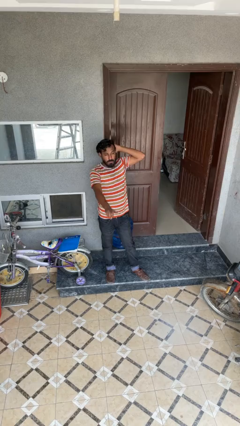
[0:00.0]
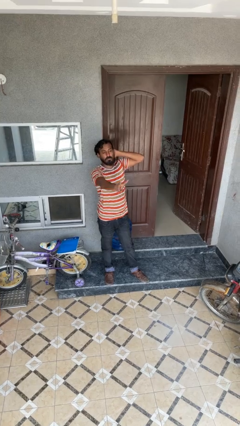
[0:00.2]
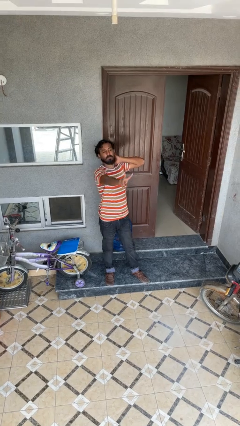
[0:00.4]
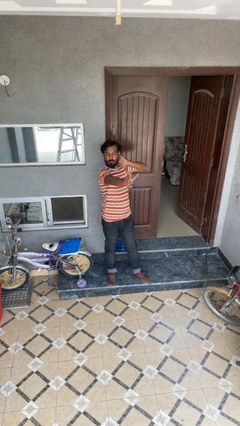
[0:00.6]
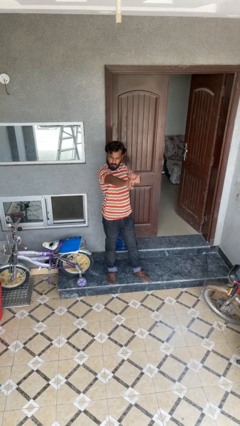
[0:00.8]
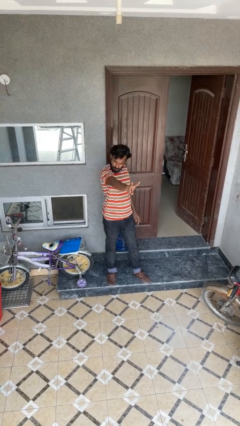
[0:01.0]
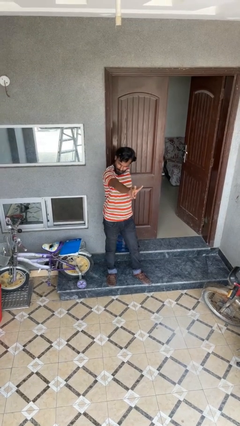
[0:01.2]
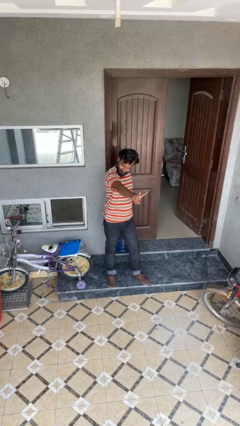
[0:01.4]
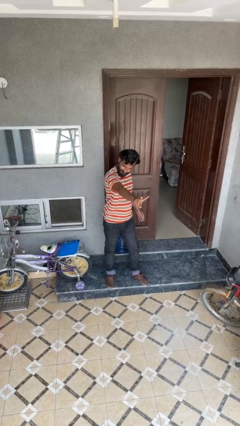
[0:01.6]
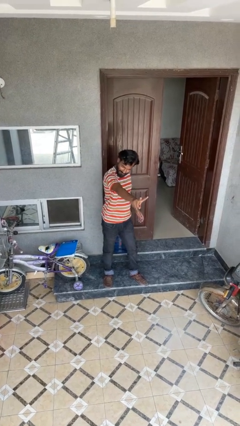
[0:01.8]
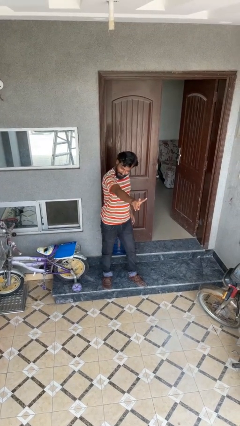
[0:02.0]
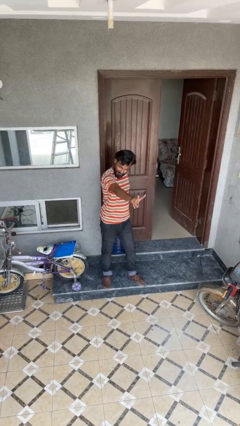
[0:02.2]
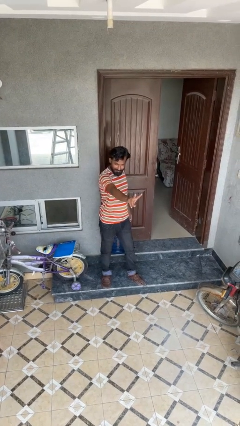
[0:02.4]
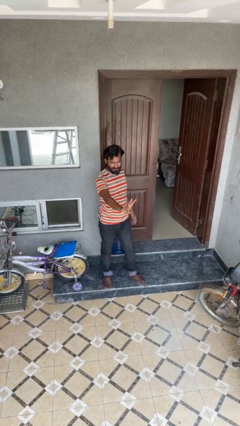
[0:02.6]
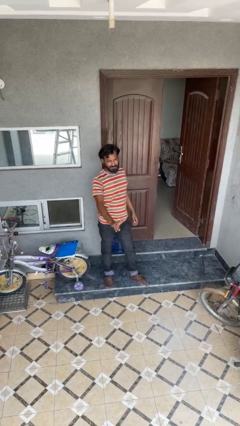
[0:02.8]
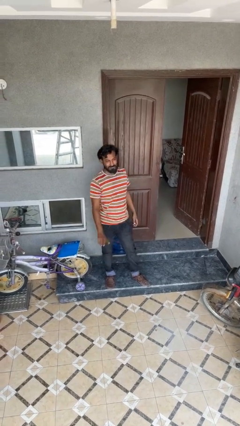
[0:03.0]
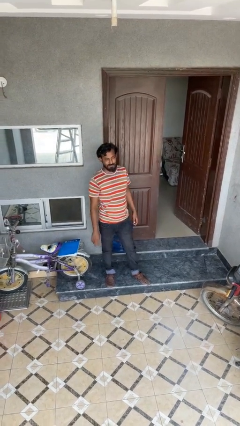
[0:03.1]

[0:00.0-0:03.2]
person gestures peace

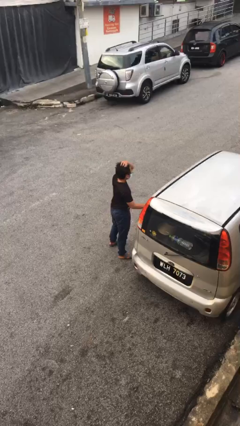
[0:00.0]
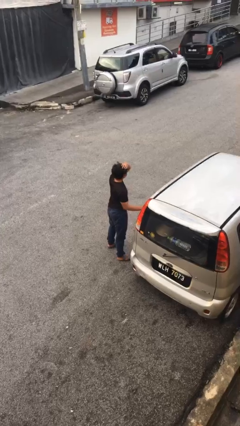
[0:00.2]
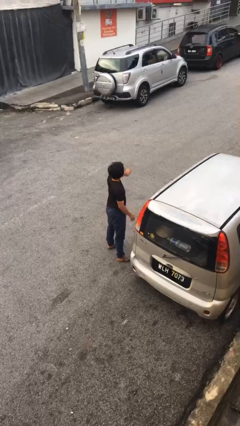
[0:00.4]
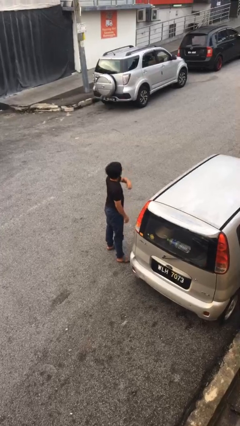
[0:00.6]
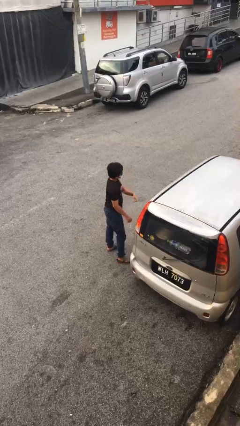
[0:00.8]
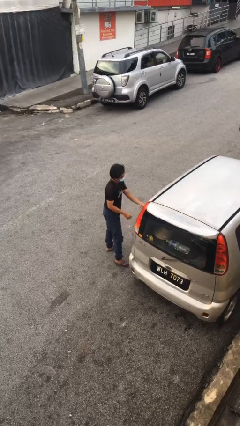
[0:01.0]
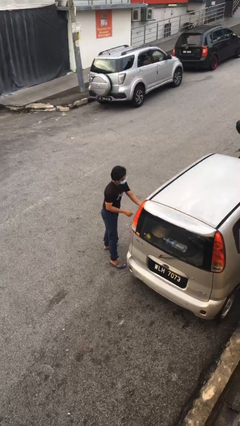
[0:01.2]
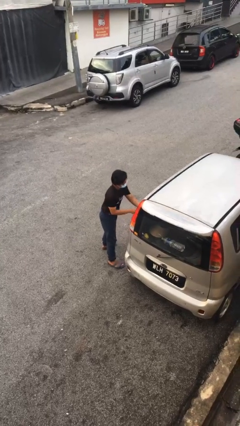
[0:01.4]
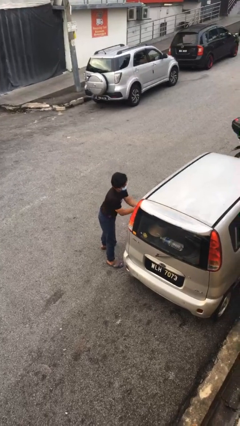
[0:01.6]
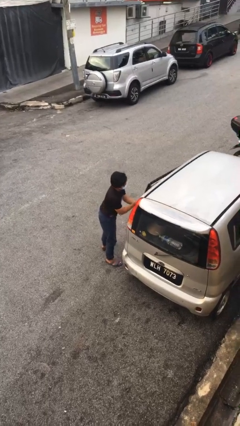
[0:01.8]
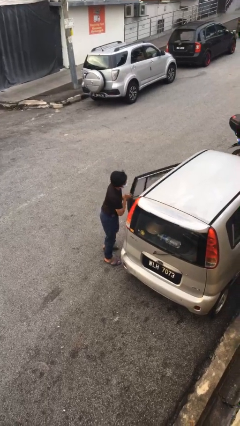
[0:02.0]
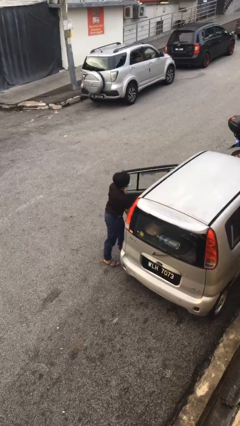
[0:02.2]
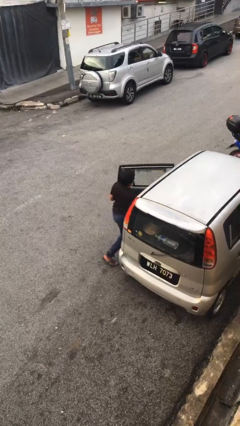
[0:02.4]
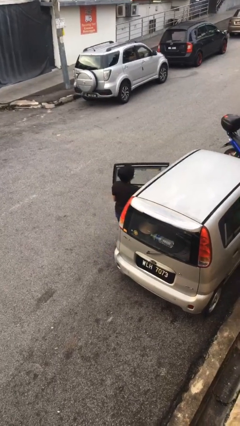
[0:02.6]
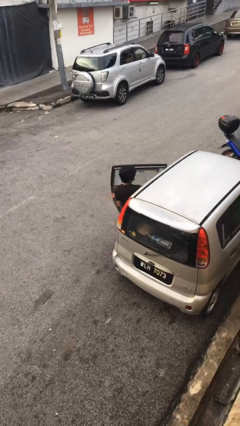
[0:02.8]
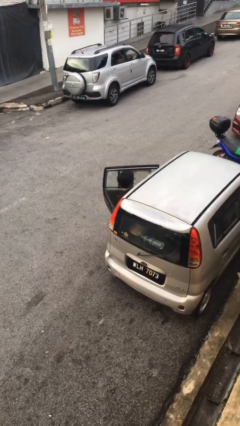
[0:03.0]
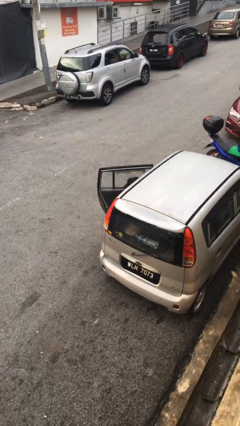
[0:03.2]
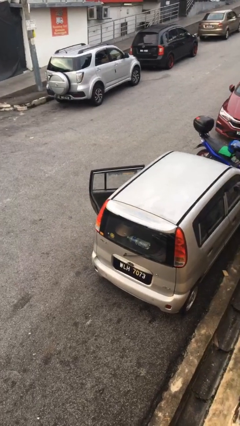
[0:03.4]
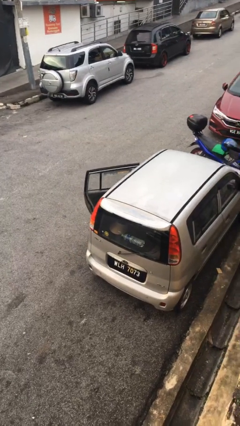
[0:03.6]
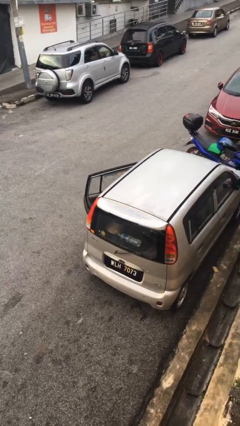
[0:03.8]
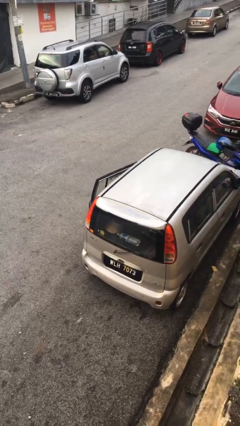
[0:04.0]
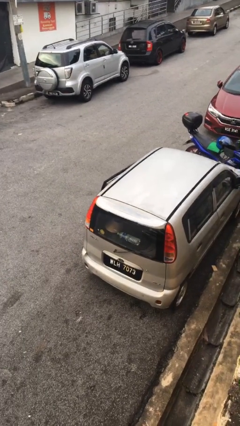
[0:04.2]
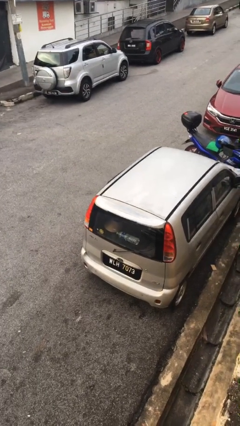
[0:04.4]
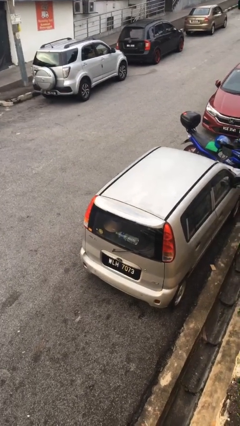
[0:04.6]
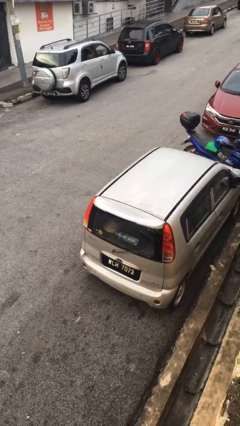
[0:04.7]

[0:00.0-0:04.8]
person enters car

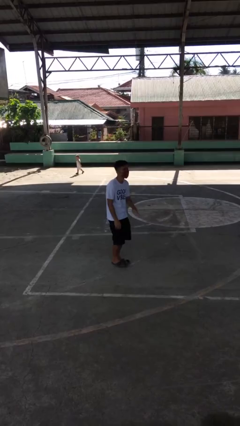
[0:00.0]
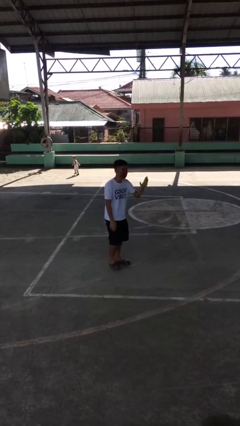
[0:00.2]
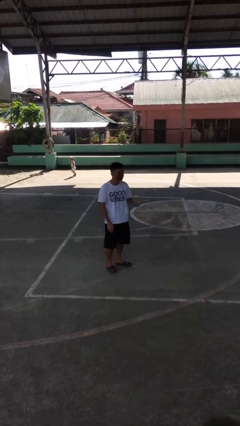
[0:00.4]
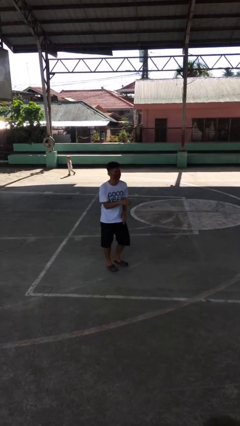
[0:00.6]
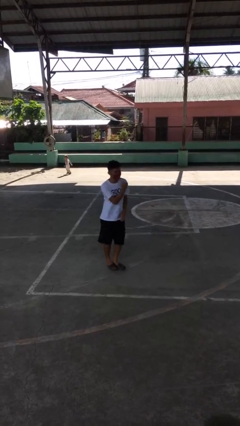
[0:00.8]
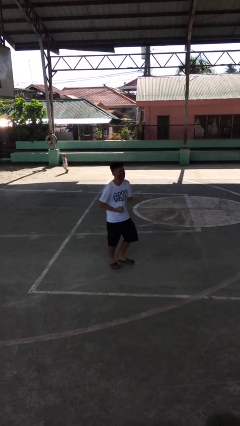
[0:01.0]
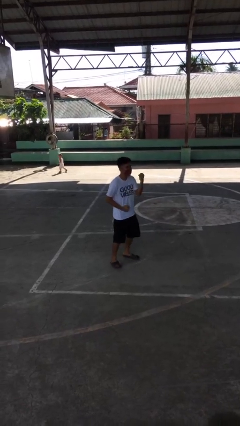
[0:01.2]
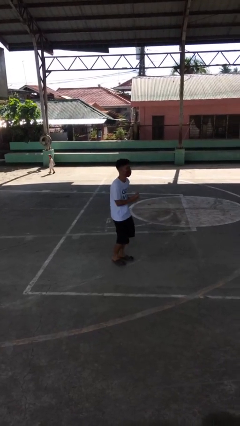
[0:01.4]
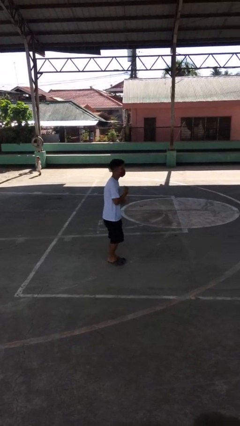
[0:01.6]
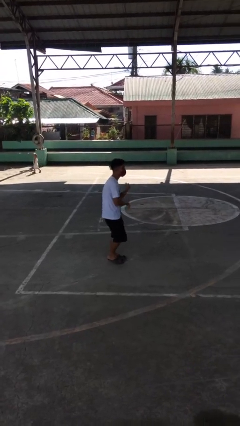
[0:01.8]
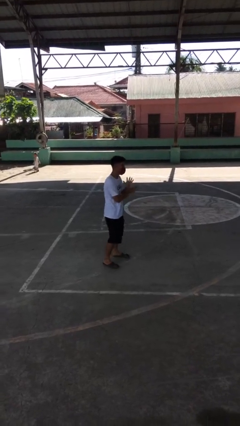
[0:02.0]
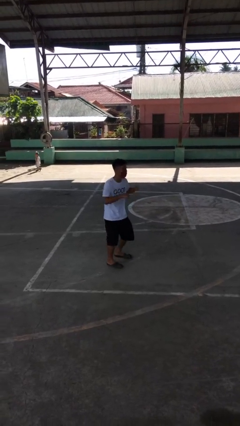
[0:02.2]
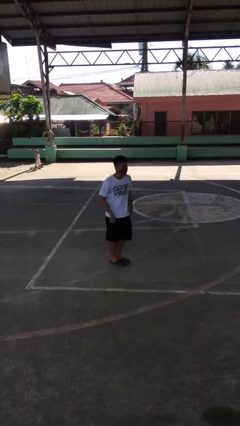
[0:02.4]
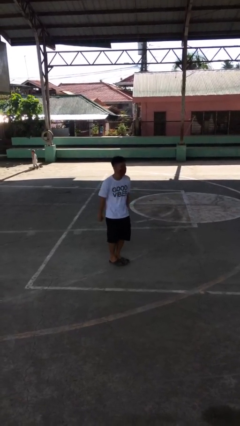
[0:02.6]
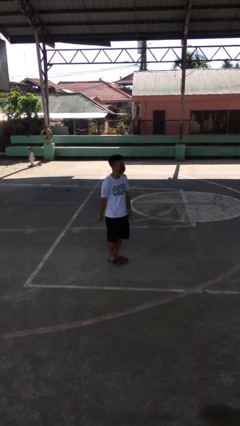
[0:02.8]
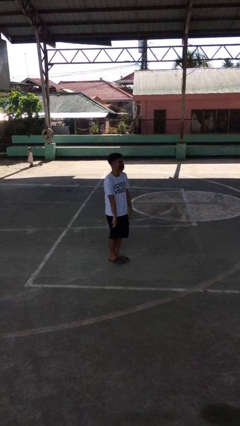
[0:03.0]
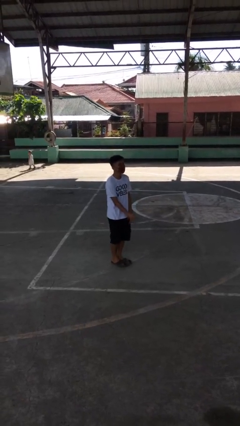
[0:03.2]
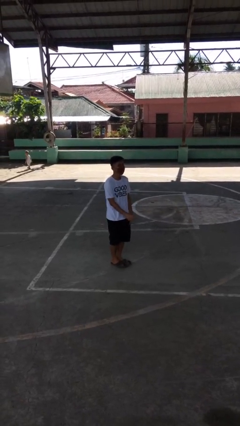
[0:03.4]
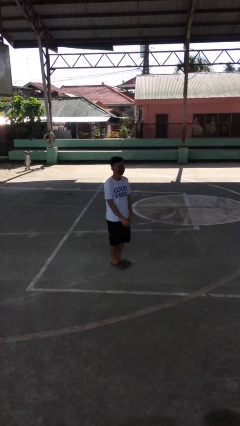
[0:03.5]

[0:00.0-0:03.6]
person dances in place

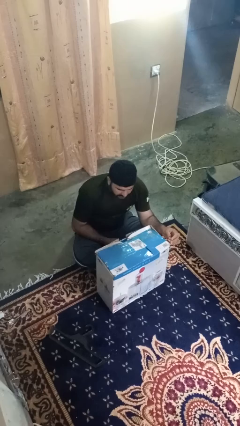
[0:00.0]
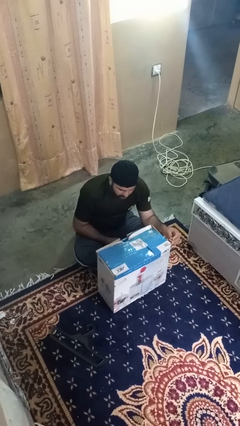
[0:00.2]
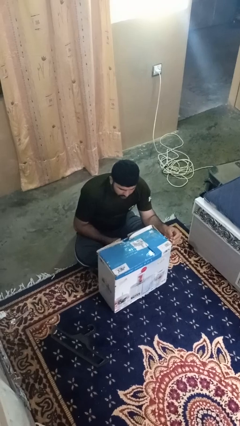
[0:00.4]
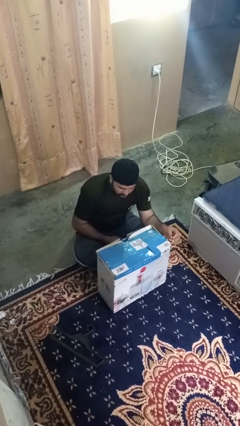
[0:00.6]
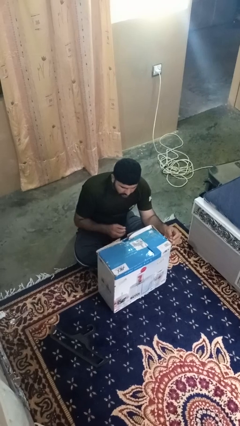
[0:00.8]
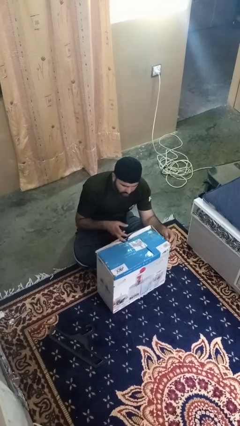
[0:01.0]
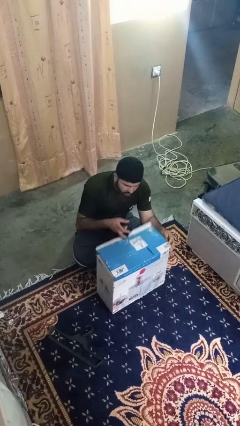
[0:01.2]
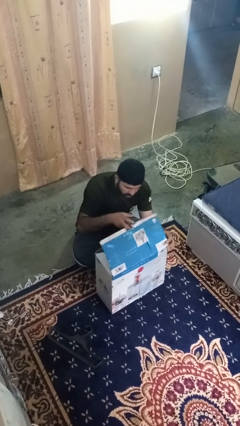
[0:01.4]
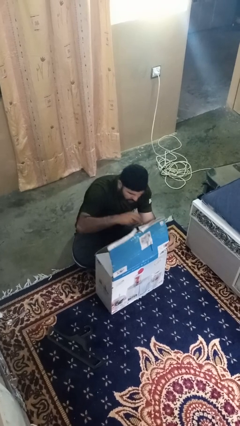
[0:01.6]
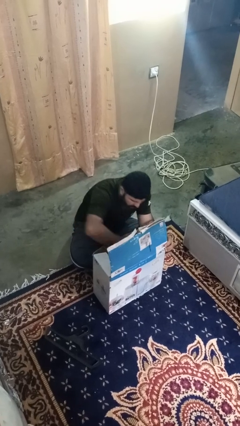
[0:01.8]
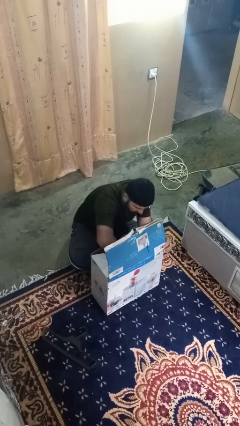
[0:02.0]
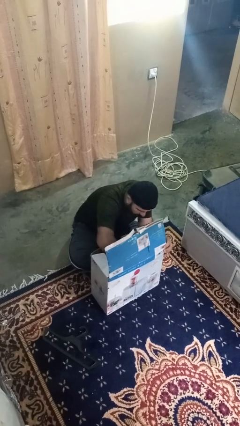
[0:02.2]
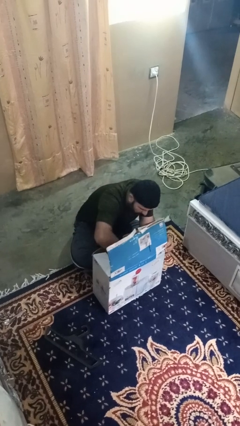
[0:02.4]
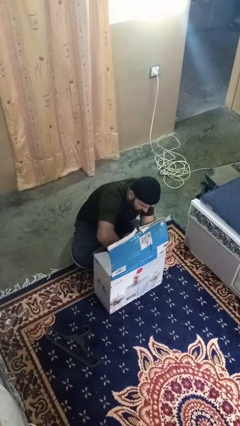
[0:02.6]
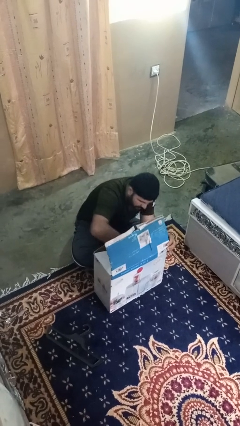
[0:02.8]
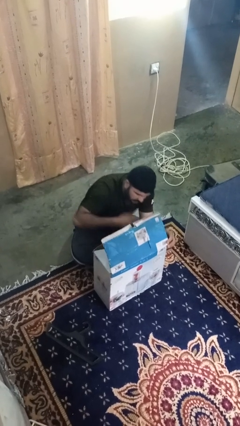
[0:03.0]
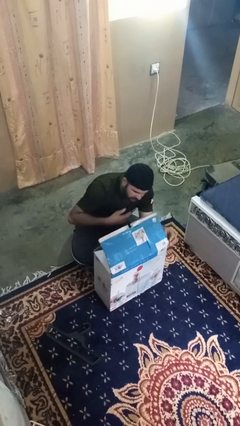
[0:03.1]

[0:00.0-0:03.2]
person searches in box

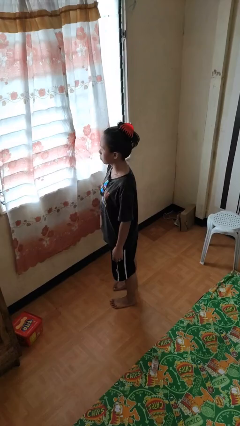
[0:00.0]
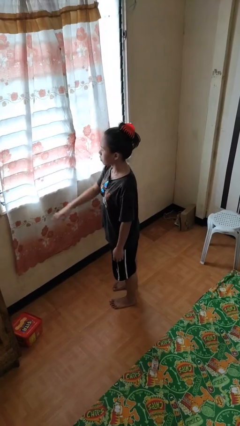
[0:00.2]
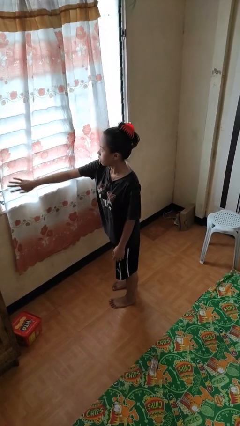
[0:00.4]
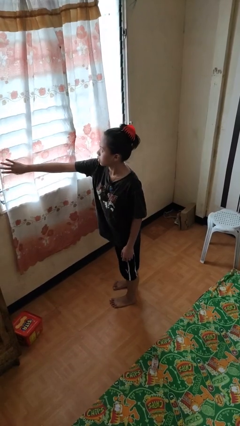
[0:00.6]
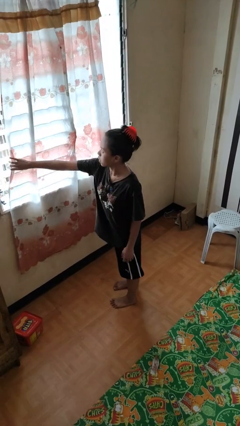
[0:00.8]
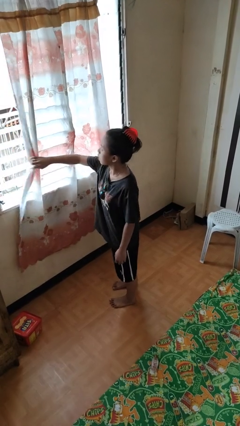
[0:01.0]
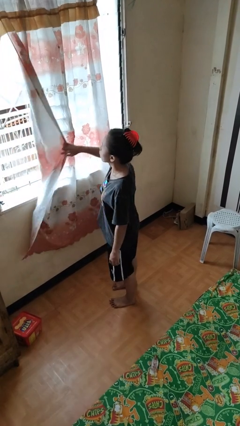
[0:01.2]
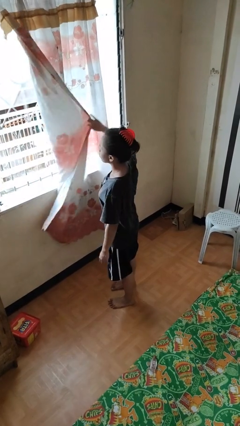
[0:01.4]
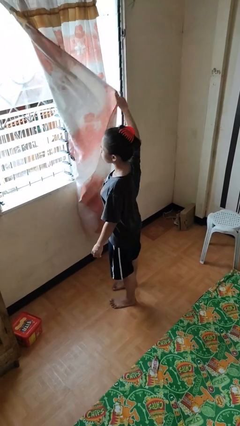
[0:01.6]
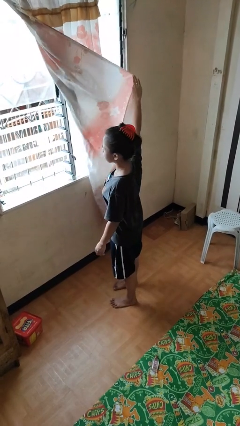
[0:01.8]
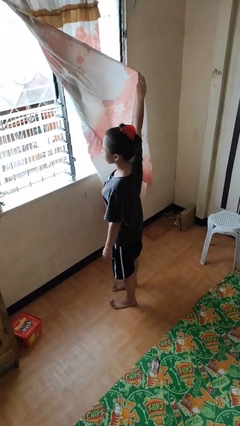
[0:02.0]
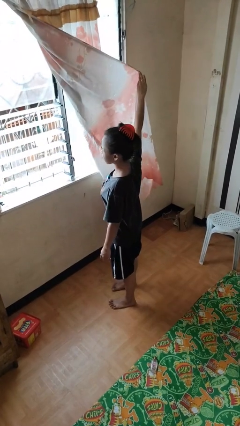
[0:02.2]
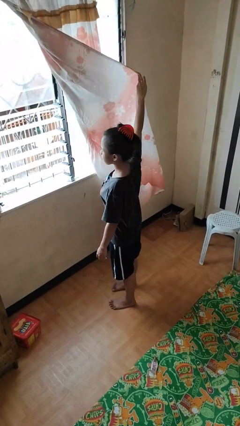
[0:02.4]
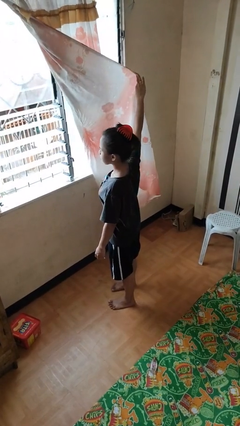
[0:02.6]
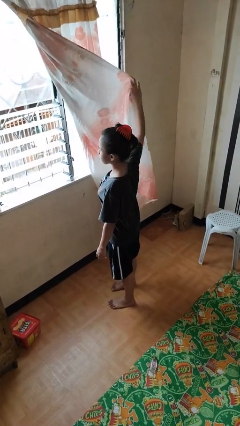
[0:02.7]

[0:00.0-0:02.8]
person opens curtains
